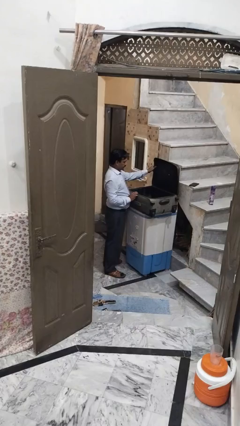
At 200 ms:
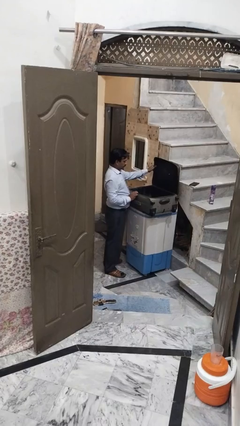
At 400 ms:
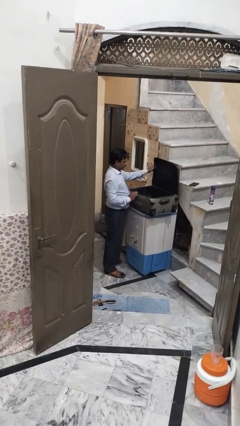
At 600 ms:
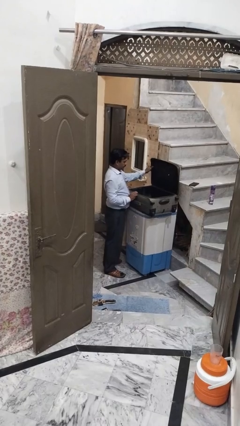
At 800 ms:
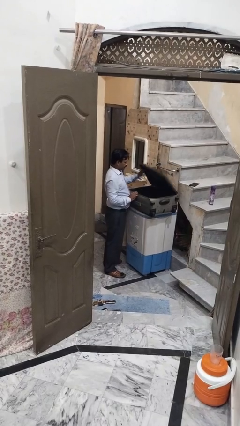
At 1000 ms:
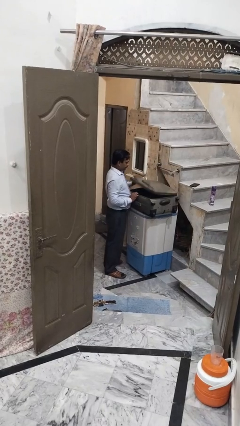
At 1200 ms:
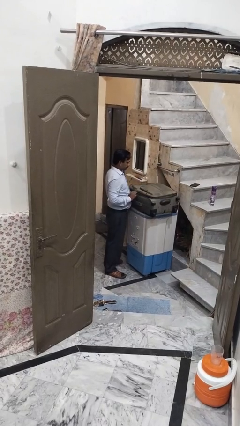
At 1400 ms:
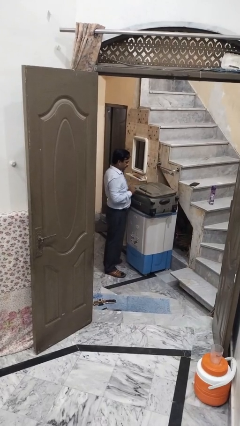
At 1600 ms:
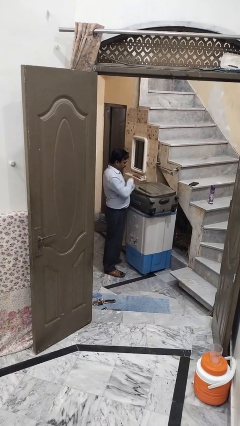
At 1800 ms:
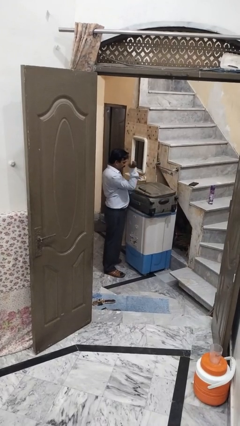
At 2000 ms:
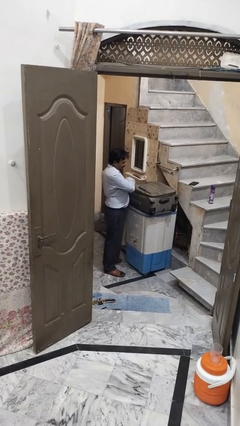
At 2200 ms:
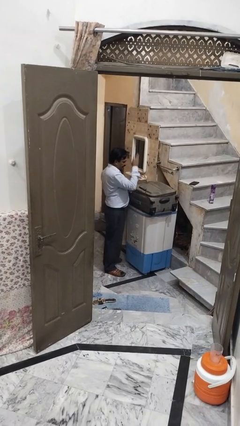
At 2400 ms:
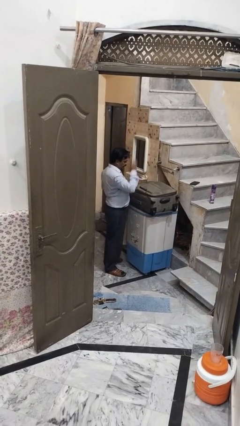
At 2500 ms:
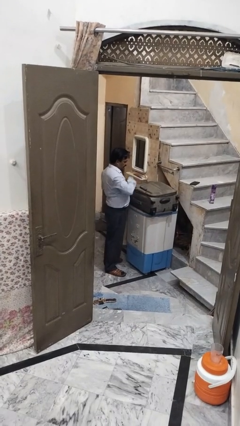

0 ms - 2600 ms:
person closes suitcase

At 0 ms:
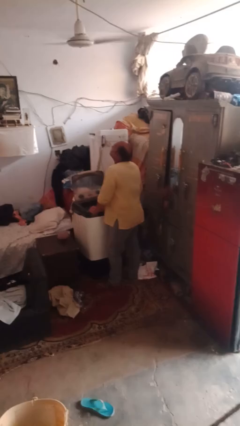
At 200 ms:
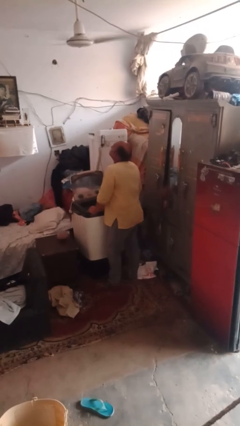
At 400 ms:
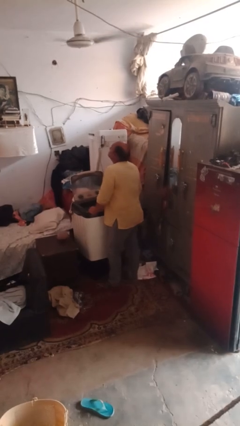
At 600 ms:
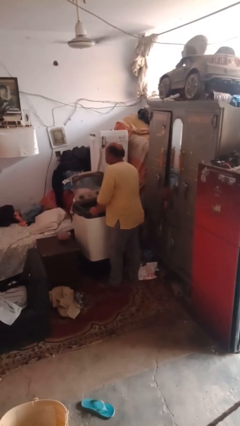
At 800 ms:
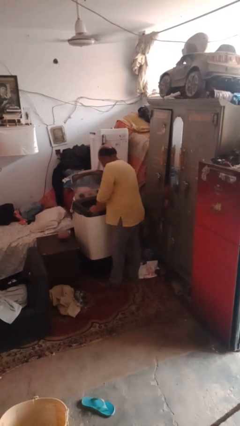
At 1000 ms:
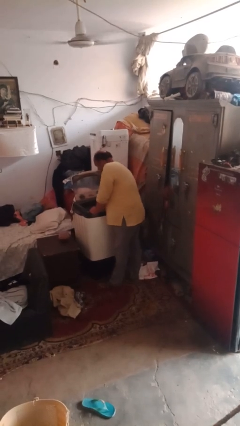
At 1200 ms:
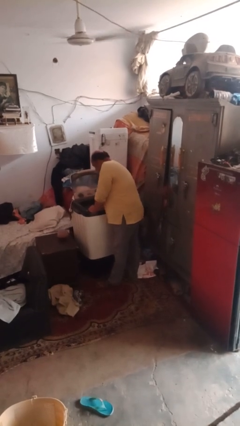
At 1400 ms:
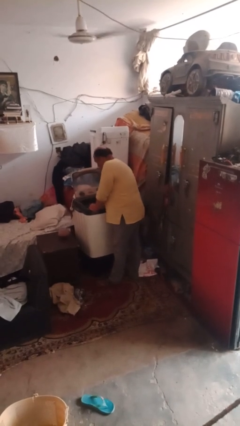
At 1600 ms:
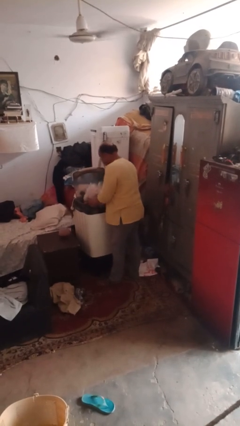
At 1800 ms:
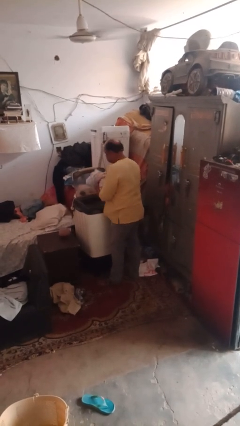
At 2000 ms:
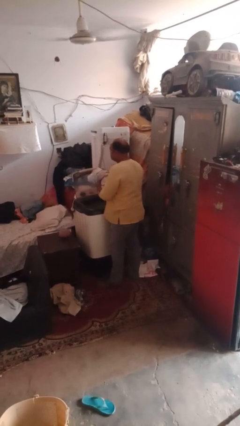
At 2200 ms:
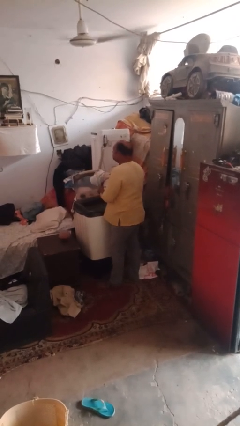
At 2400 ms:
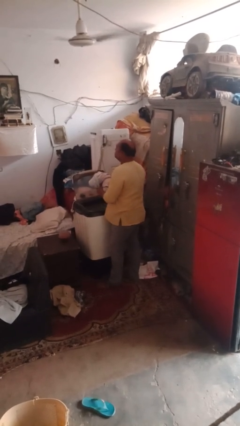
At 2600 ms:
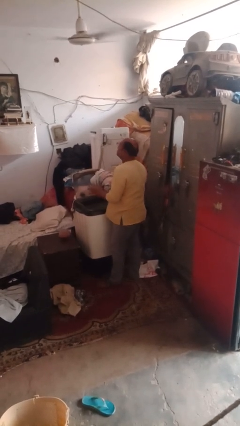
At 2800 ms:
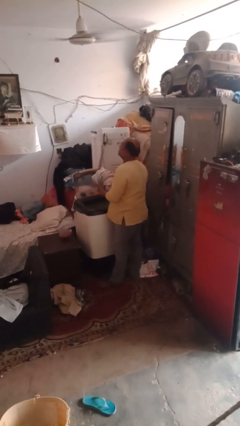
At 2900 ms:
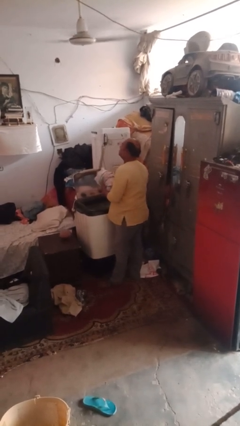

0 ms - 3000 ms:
person unloads clotheswasher

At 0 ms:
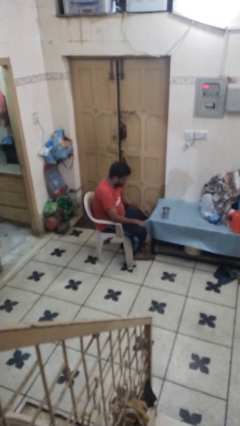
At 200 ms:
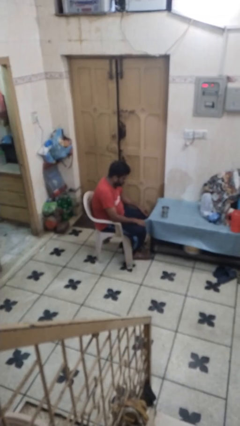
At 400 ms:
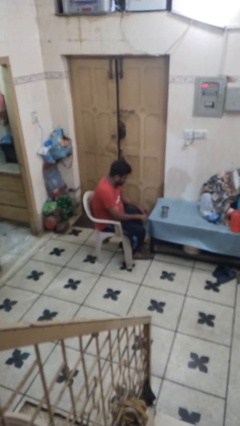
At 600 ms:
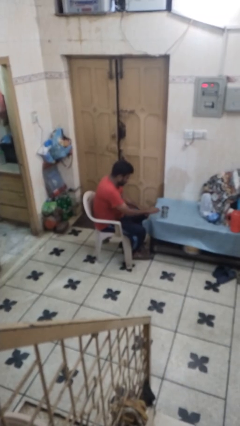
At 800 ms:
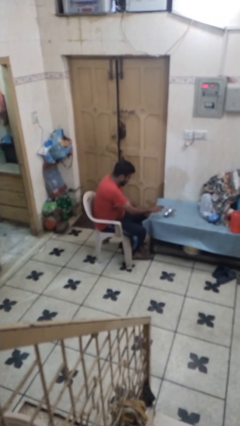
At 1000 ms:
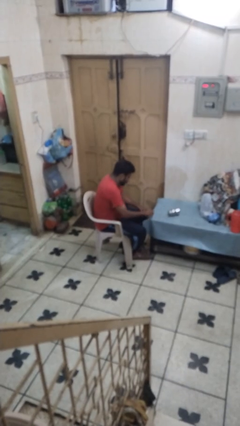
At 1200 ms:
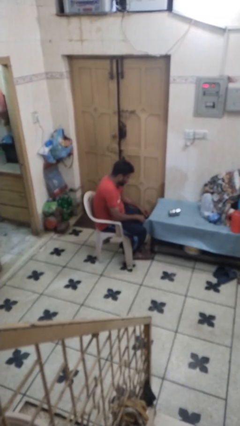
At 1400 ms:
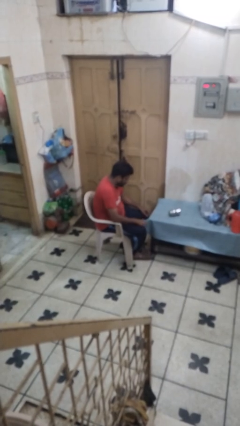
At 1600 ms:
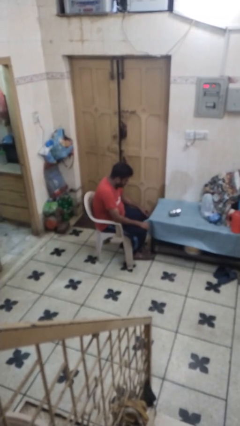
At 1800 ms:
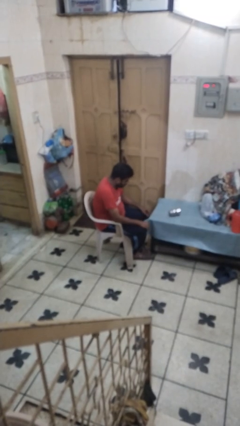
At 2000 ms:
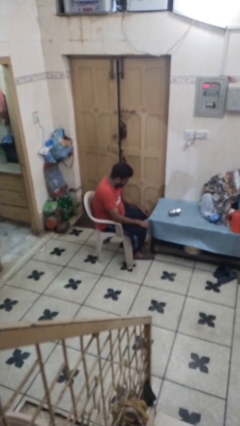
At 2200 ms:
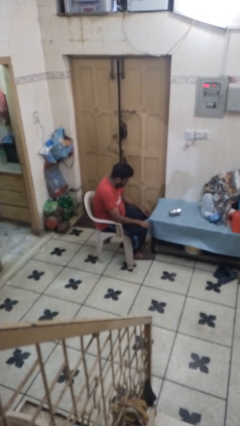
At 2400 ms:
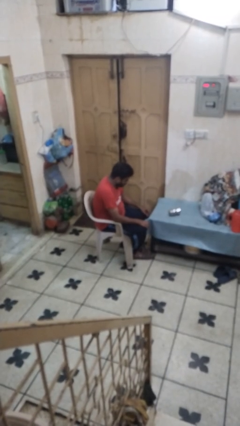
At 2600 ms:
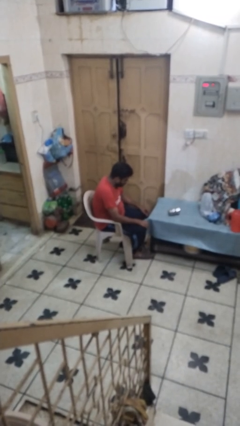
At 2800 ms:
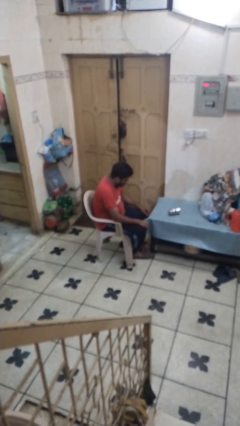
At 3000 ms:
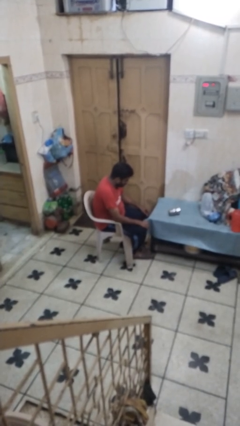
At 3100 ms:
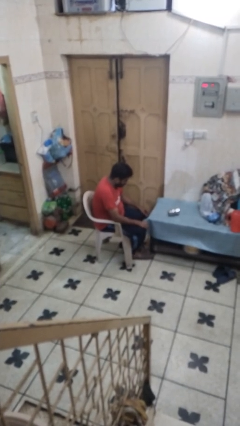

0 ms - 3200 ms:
person knocks over glass

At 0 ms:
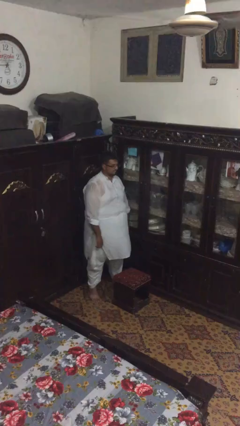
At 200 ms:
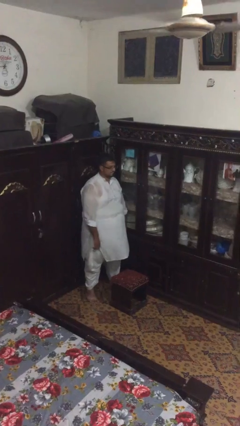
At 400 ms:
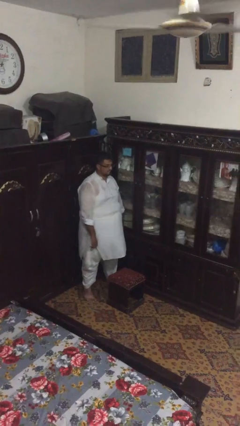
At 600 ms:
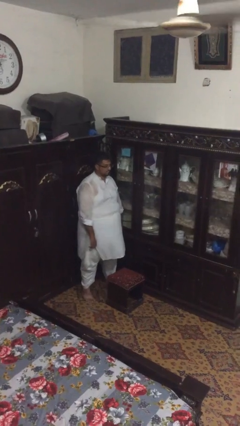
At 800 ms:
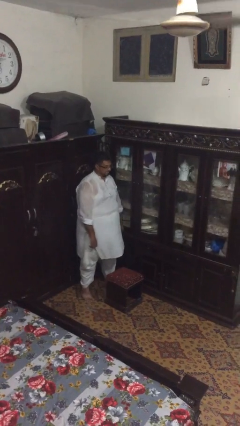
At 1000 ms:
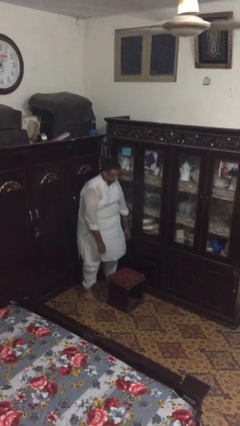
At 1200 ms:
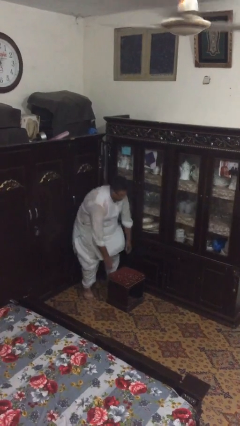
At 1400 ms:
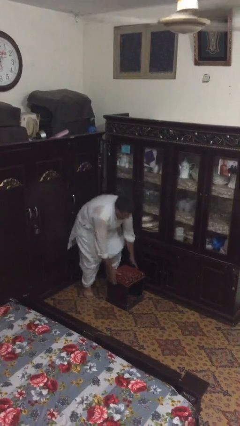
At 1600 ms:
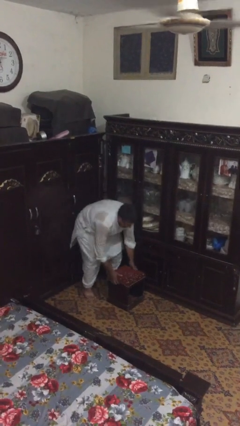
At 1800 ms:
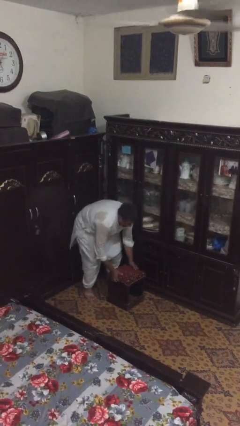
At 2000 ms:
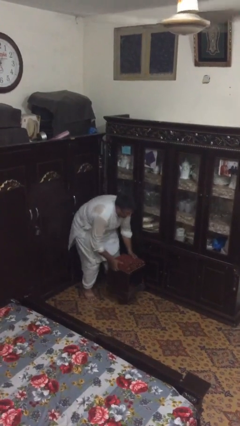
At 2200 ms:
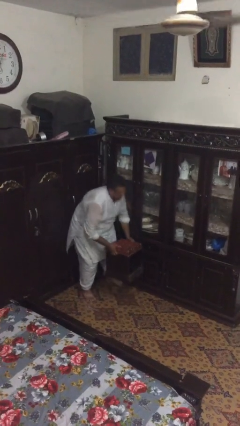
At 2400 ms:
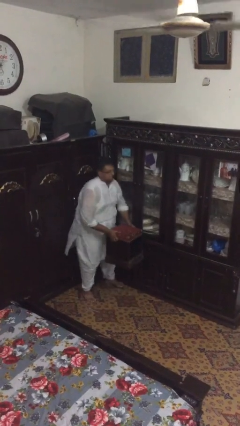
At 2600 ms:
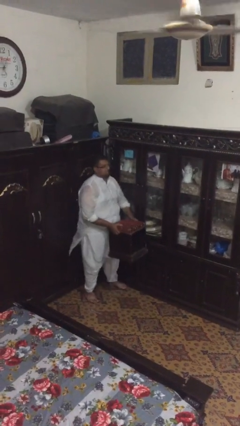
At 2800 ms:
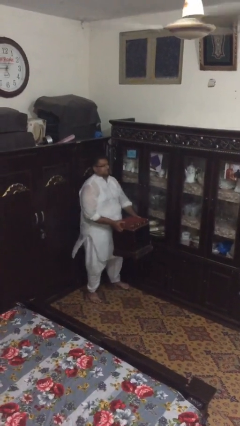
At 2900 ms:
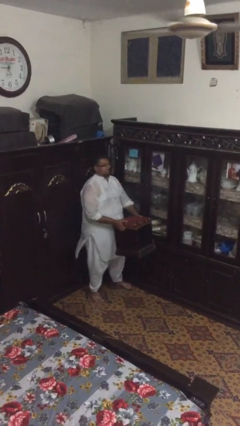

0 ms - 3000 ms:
person picks up object from floor

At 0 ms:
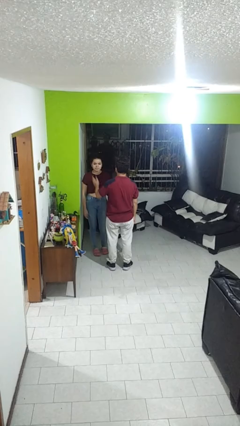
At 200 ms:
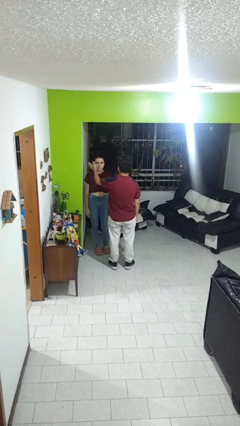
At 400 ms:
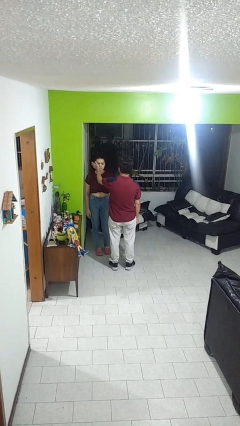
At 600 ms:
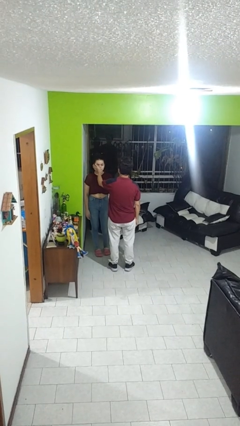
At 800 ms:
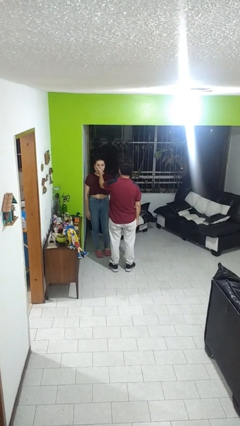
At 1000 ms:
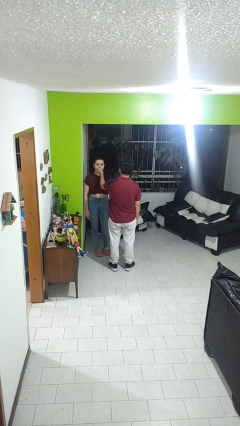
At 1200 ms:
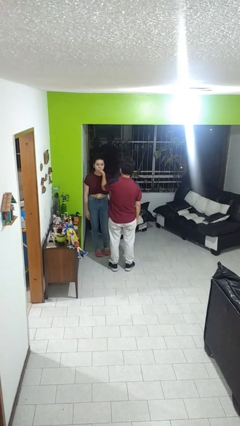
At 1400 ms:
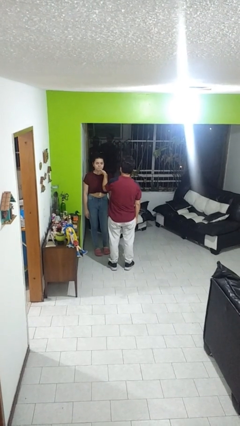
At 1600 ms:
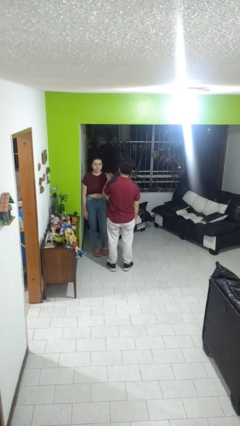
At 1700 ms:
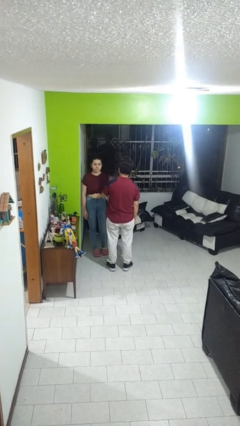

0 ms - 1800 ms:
person touches face of person

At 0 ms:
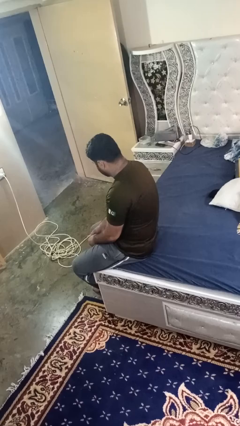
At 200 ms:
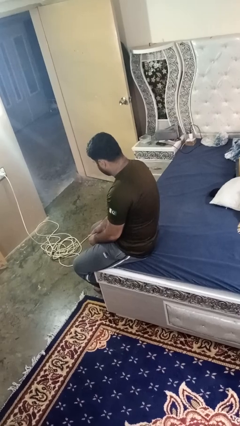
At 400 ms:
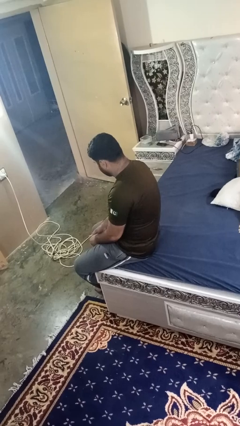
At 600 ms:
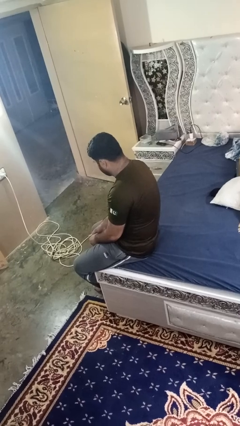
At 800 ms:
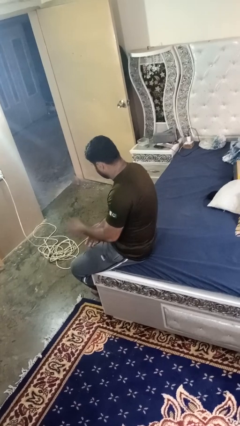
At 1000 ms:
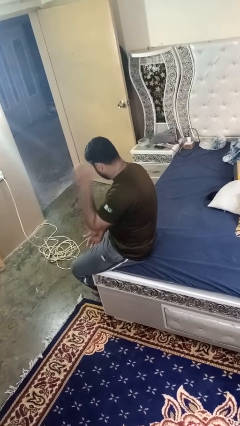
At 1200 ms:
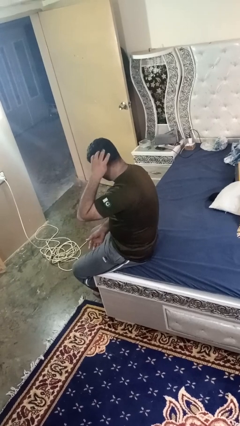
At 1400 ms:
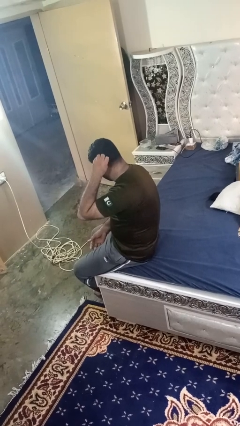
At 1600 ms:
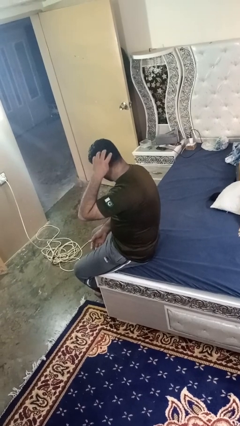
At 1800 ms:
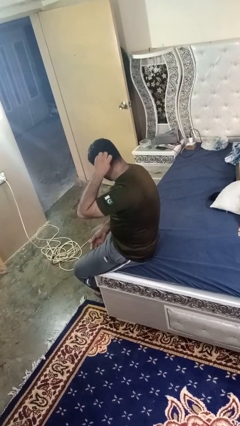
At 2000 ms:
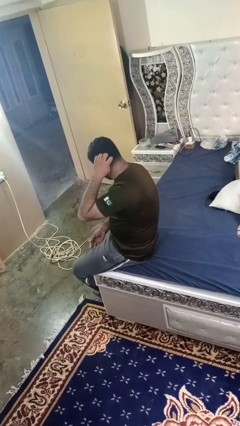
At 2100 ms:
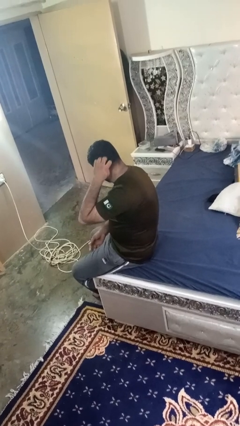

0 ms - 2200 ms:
person strokes hair

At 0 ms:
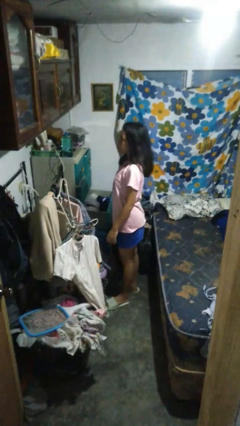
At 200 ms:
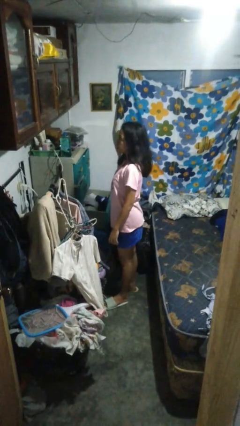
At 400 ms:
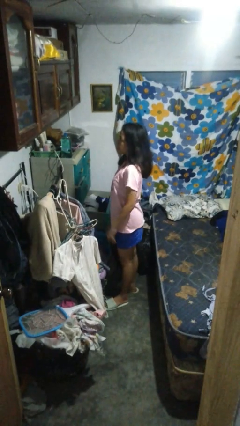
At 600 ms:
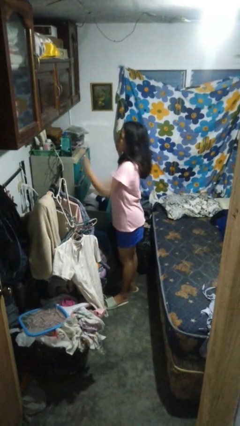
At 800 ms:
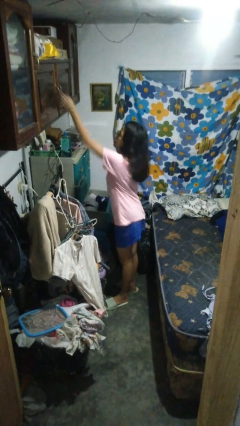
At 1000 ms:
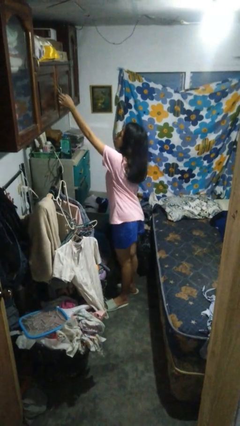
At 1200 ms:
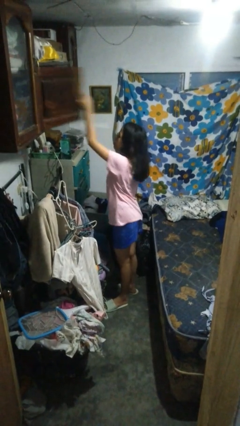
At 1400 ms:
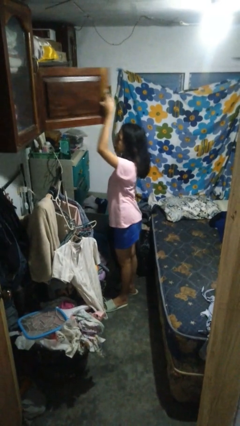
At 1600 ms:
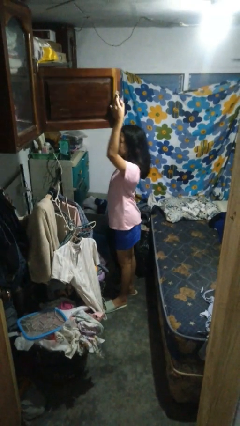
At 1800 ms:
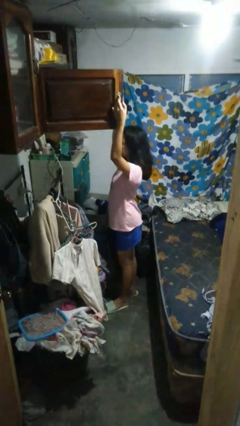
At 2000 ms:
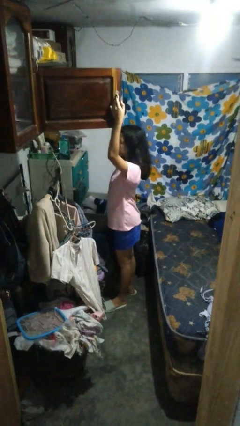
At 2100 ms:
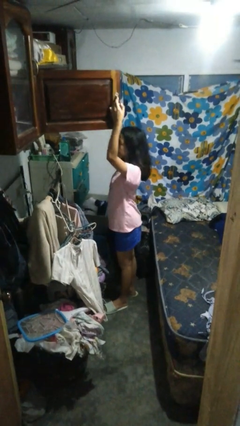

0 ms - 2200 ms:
person opens closet door
